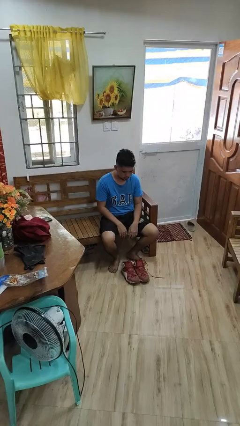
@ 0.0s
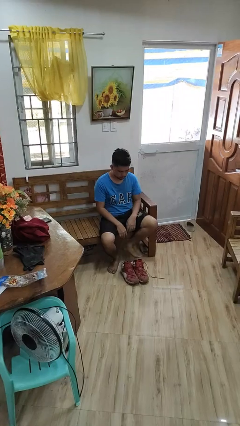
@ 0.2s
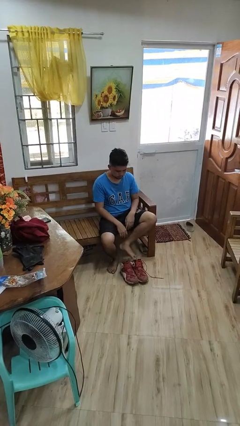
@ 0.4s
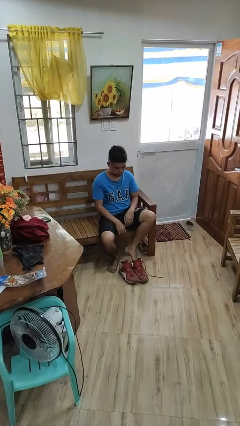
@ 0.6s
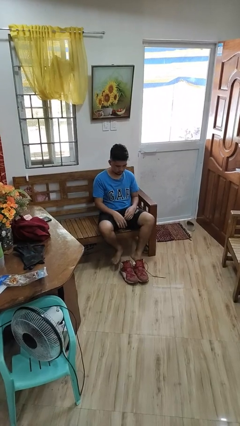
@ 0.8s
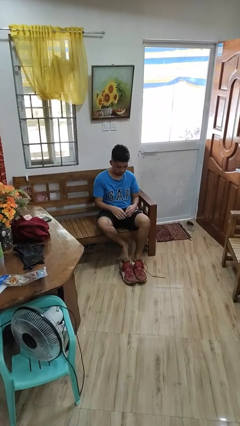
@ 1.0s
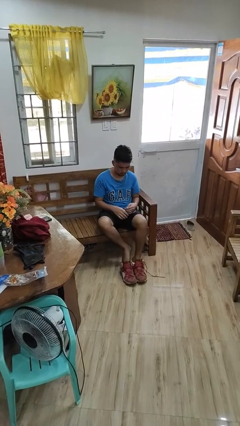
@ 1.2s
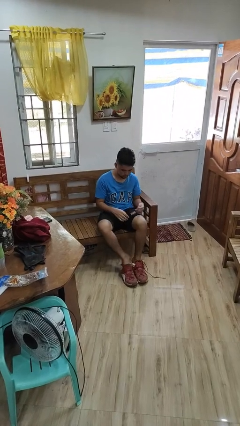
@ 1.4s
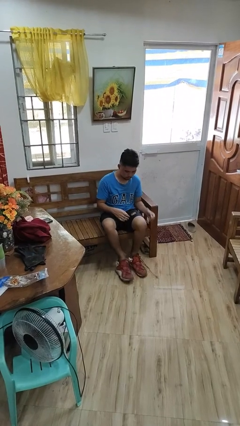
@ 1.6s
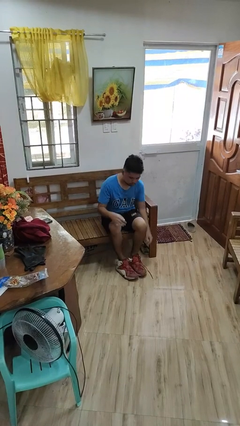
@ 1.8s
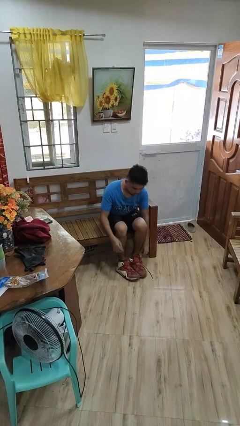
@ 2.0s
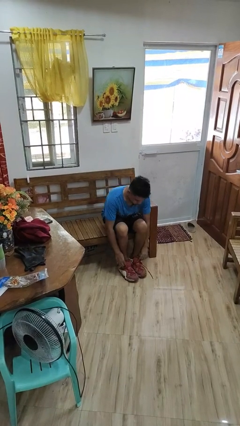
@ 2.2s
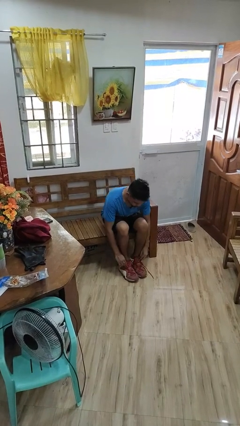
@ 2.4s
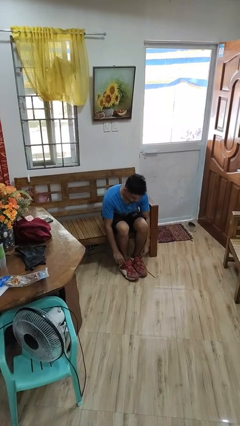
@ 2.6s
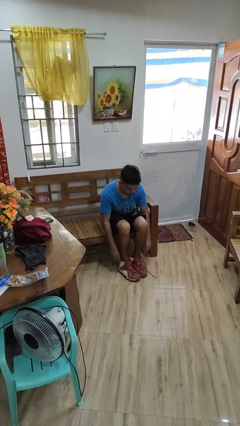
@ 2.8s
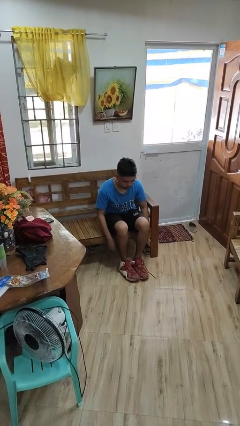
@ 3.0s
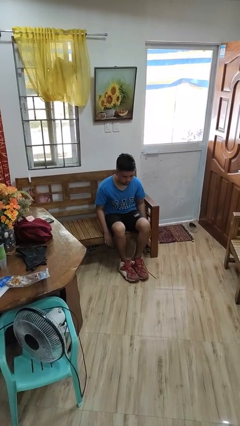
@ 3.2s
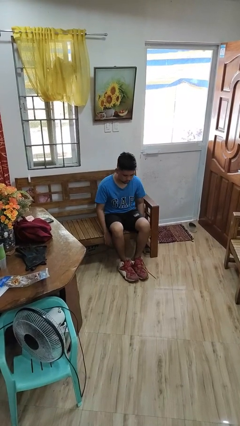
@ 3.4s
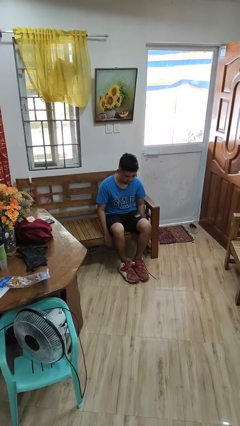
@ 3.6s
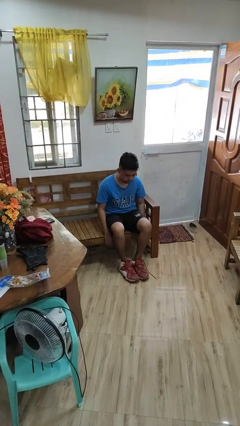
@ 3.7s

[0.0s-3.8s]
person puts on shoes
